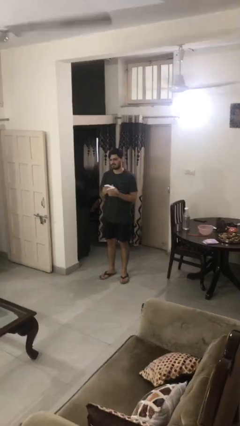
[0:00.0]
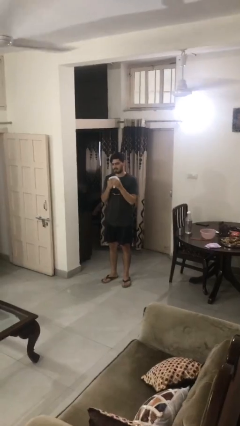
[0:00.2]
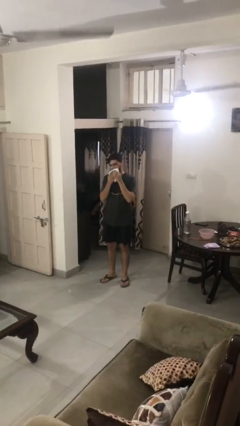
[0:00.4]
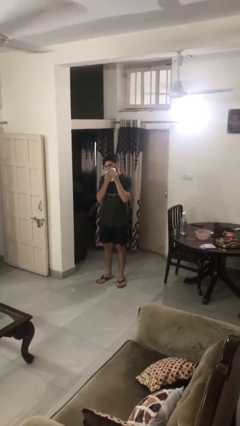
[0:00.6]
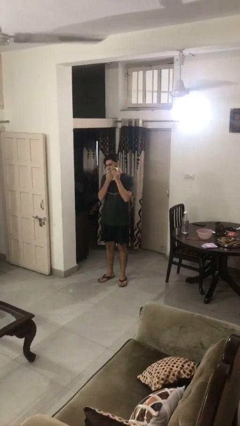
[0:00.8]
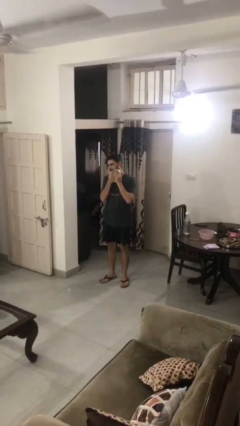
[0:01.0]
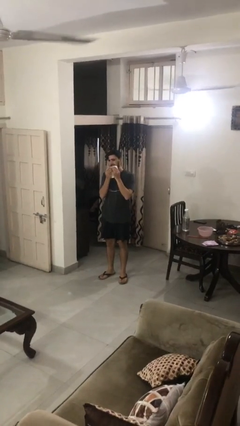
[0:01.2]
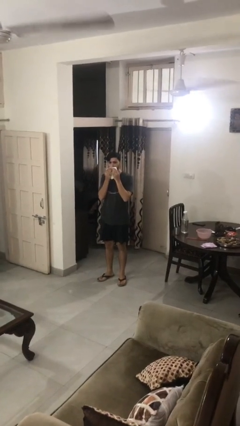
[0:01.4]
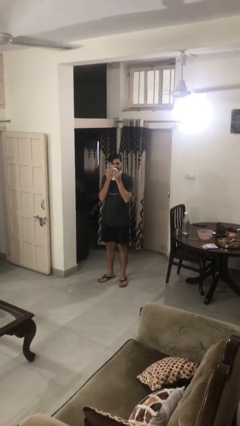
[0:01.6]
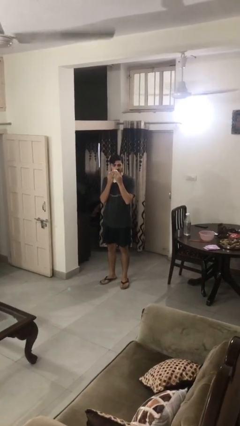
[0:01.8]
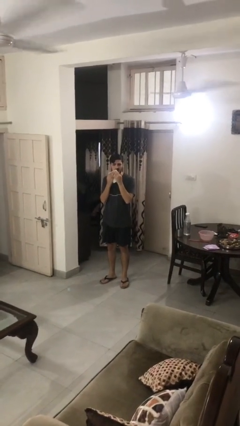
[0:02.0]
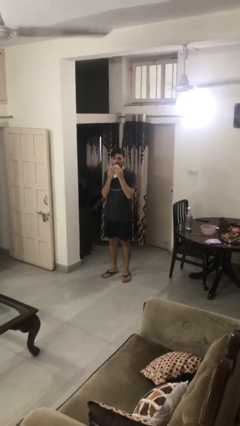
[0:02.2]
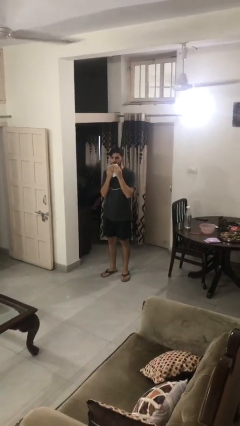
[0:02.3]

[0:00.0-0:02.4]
person wipes mouth with napkin

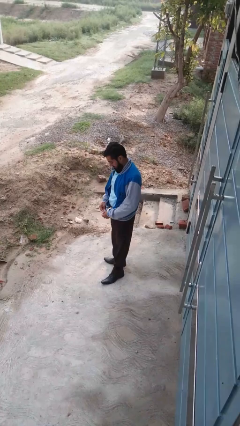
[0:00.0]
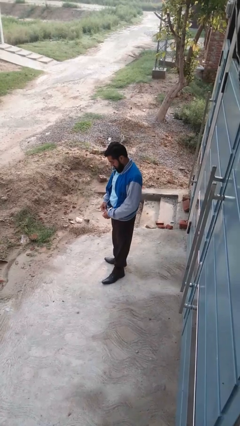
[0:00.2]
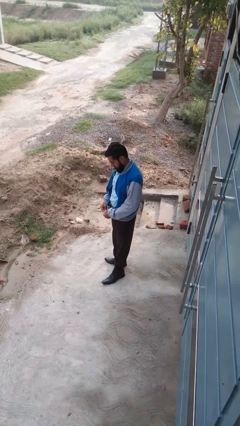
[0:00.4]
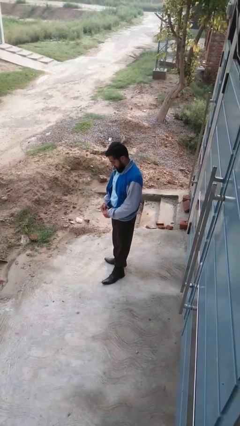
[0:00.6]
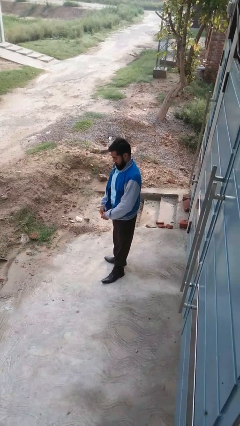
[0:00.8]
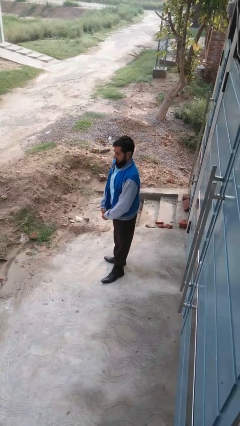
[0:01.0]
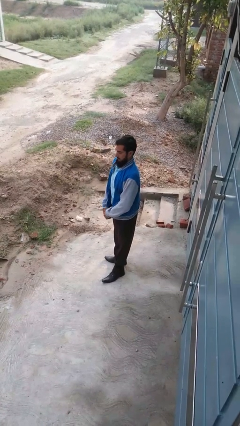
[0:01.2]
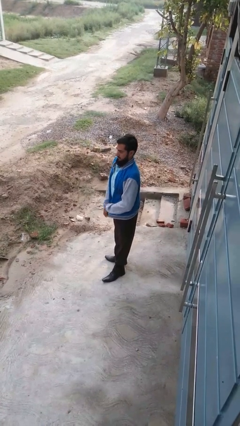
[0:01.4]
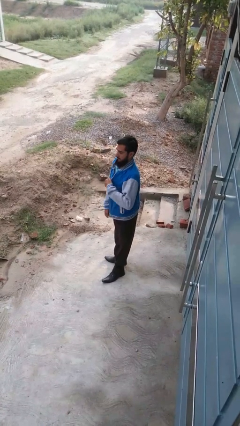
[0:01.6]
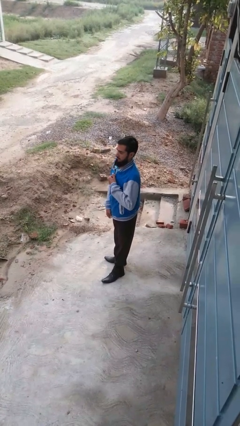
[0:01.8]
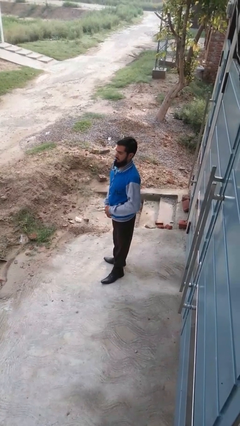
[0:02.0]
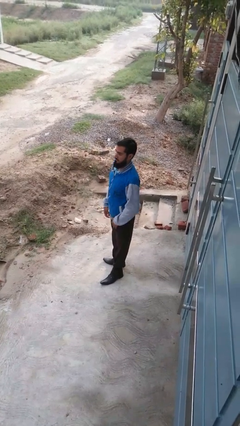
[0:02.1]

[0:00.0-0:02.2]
person zips up jacket

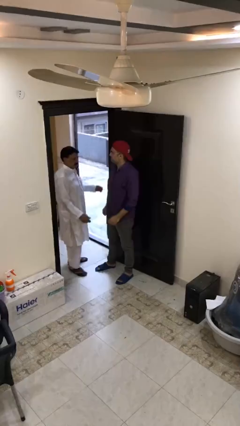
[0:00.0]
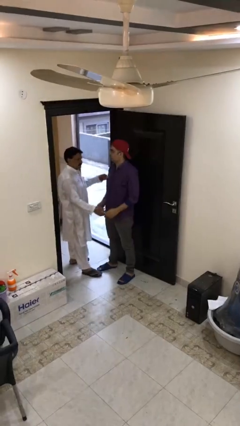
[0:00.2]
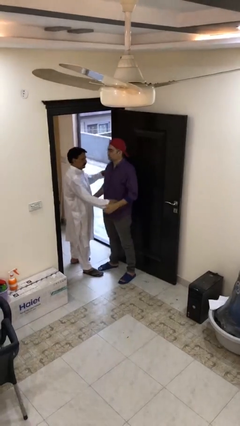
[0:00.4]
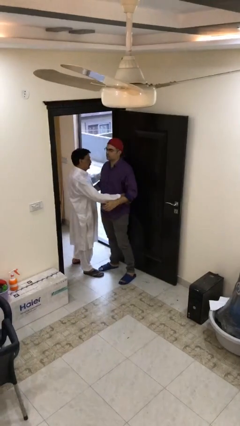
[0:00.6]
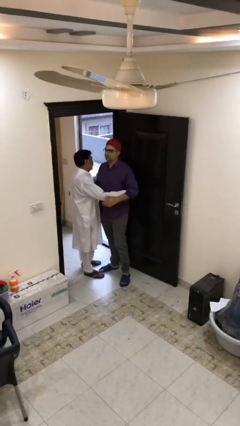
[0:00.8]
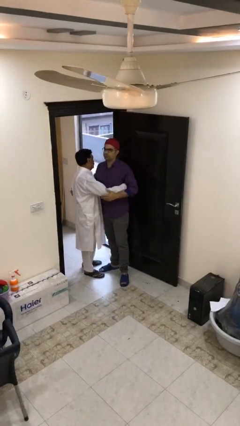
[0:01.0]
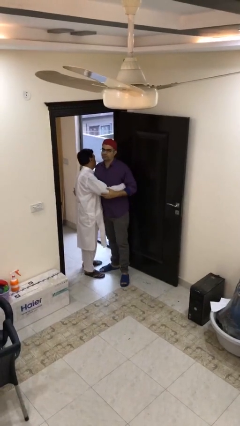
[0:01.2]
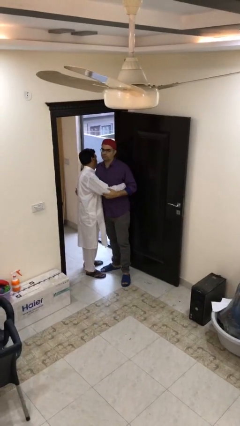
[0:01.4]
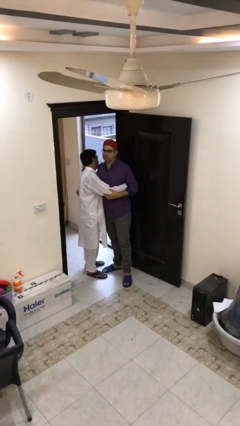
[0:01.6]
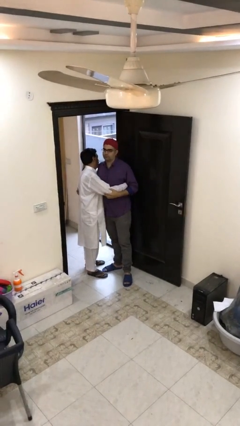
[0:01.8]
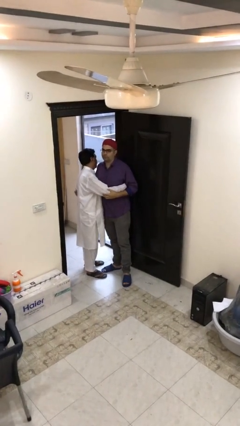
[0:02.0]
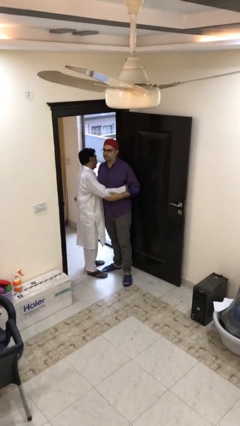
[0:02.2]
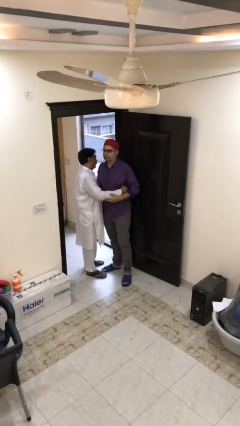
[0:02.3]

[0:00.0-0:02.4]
person embraces person

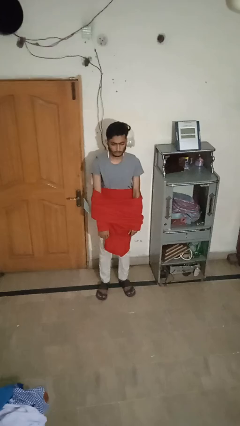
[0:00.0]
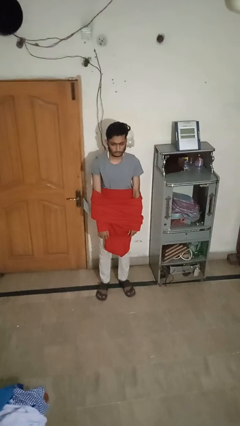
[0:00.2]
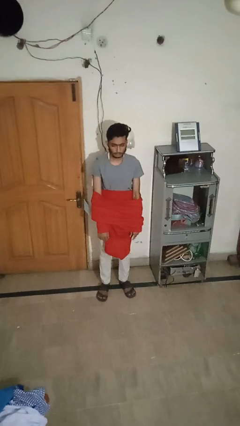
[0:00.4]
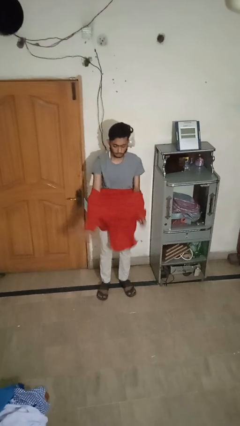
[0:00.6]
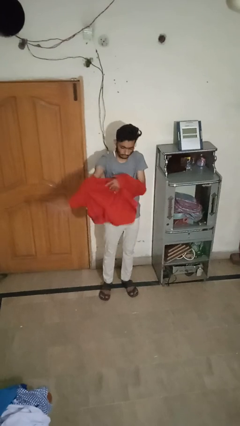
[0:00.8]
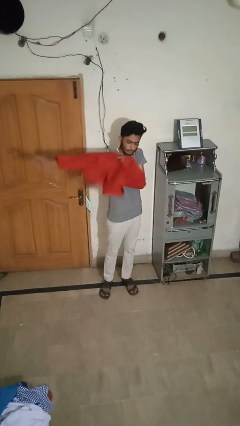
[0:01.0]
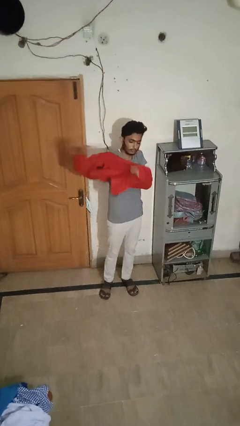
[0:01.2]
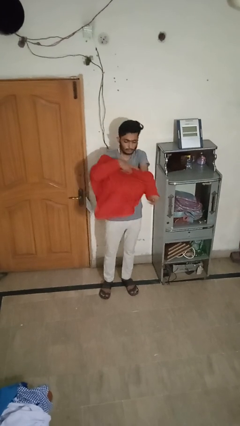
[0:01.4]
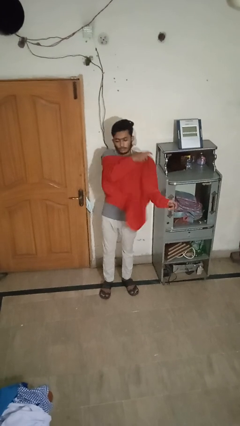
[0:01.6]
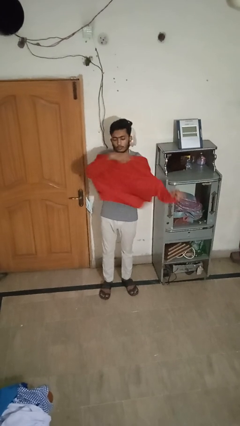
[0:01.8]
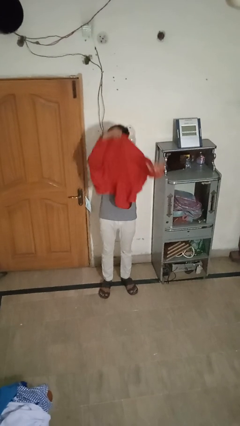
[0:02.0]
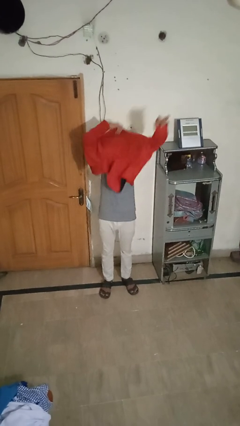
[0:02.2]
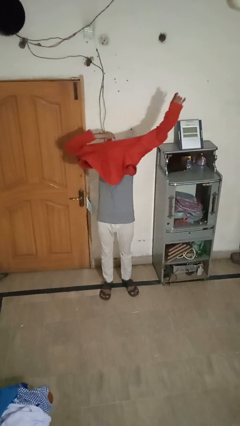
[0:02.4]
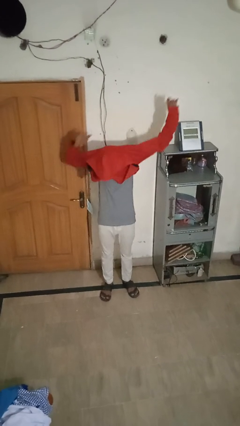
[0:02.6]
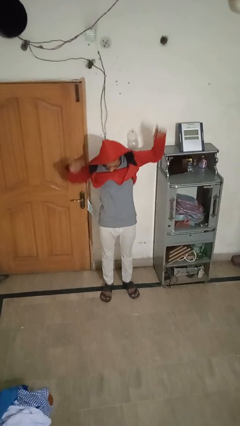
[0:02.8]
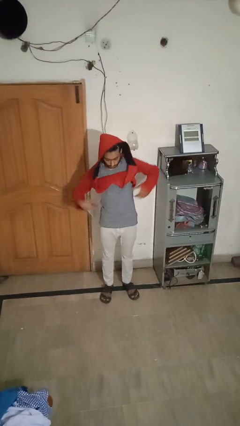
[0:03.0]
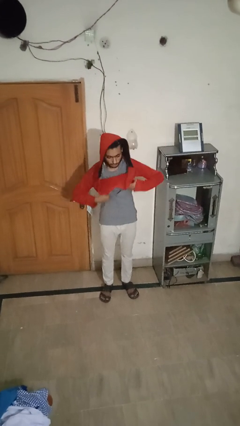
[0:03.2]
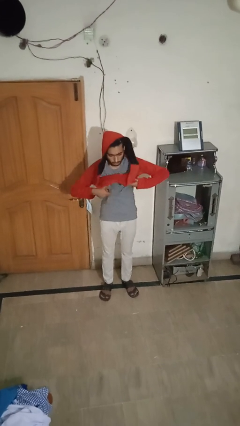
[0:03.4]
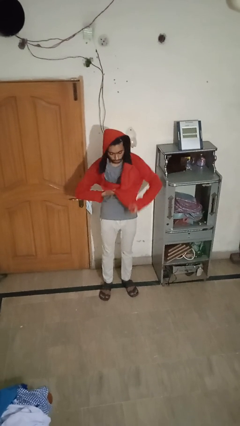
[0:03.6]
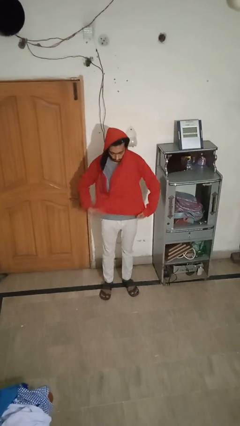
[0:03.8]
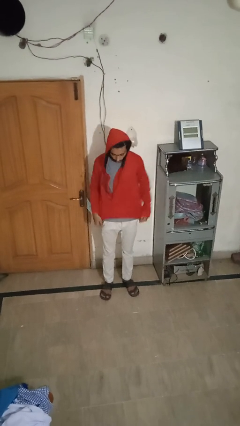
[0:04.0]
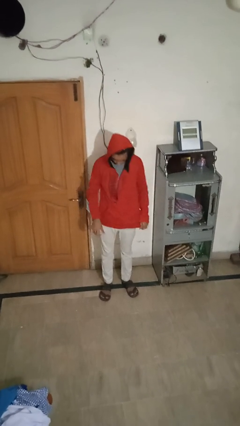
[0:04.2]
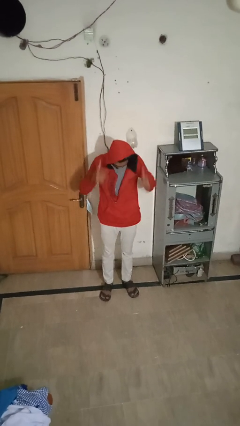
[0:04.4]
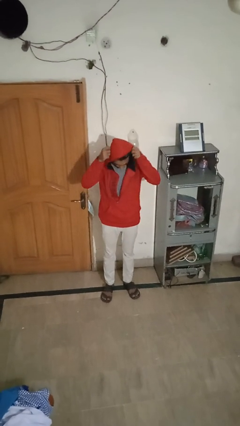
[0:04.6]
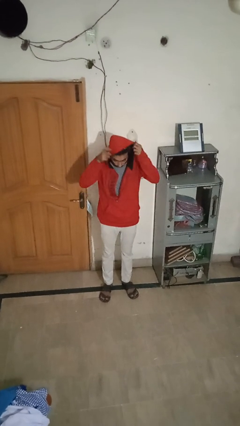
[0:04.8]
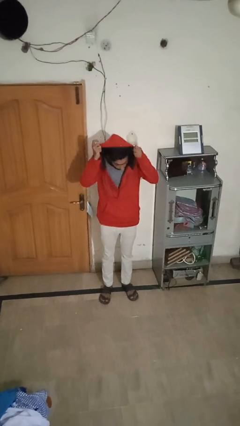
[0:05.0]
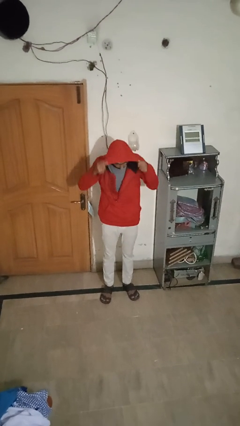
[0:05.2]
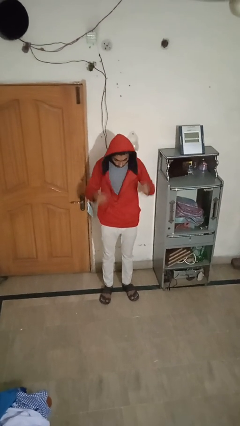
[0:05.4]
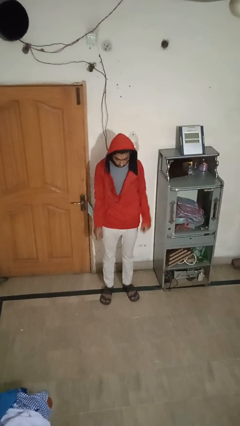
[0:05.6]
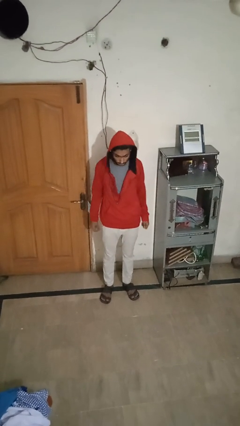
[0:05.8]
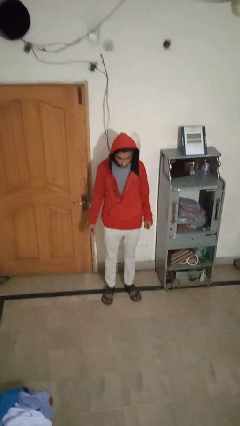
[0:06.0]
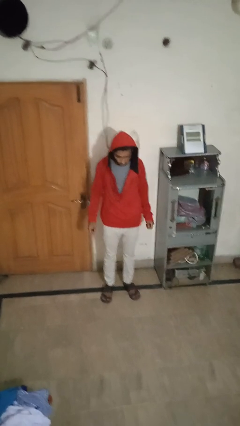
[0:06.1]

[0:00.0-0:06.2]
person puts on hoodie

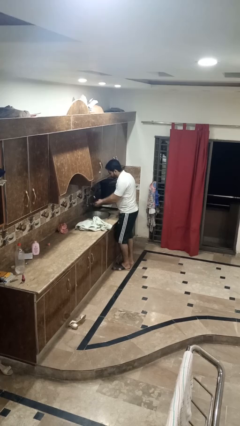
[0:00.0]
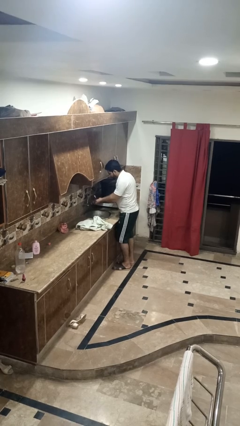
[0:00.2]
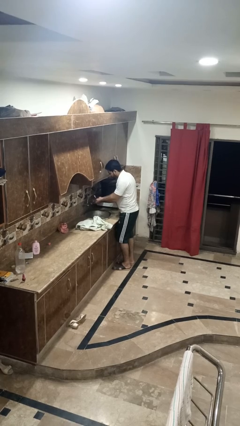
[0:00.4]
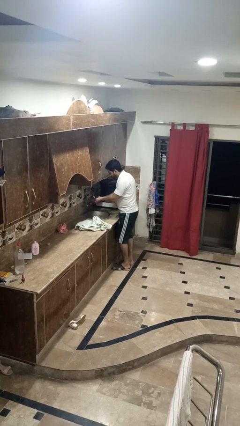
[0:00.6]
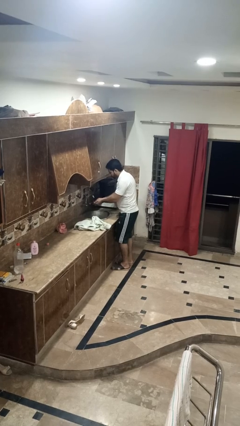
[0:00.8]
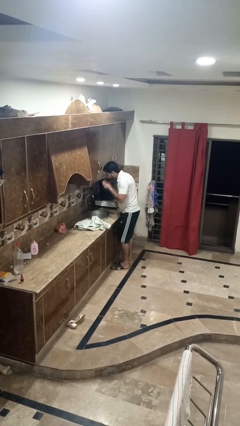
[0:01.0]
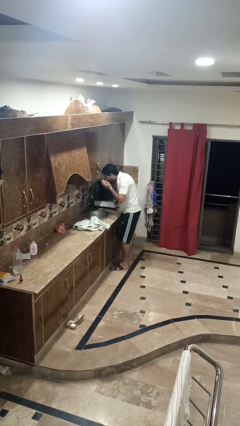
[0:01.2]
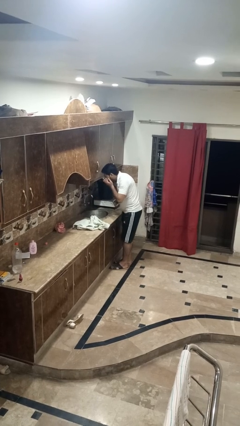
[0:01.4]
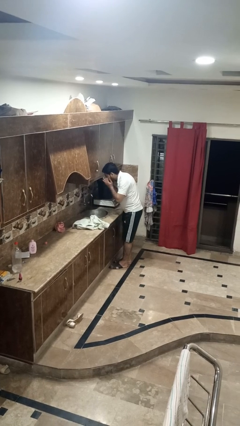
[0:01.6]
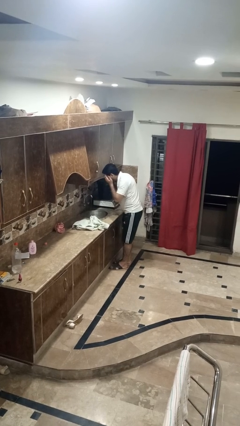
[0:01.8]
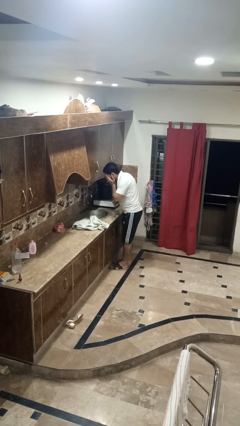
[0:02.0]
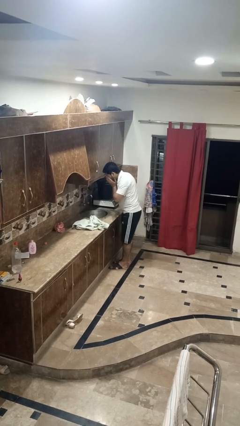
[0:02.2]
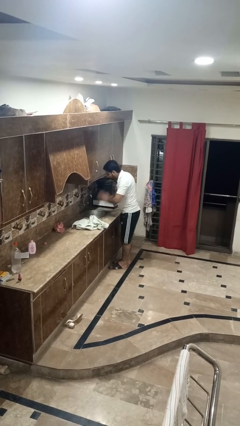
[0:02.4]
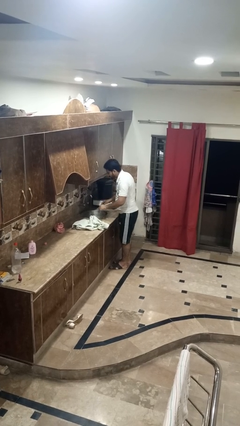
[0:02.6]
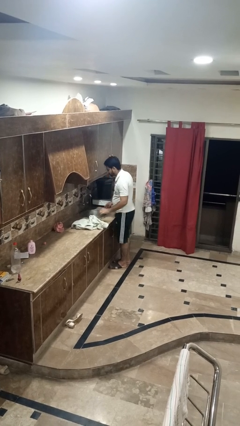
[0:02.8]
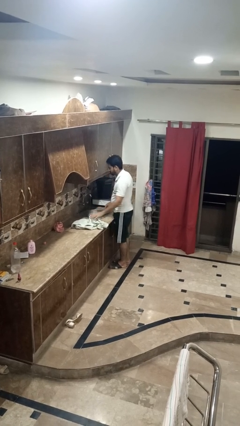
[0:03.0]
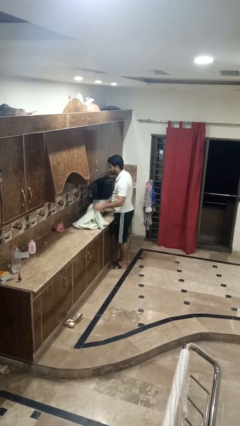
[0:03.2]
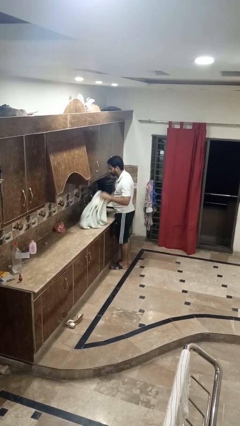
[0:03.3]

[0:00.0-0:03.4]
person washes face

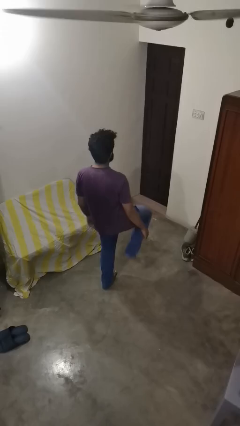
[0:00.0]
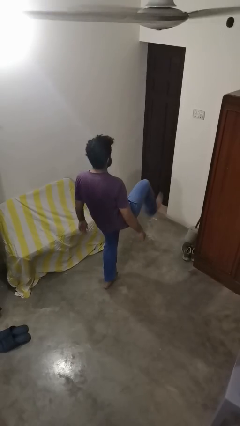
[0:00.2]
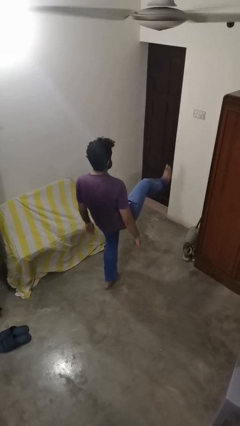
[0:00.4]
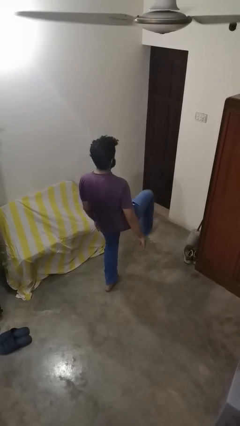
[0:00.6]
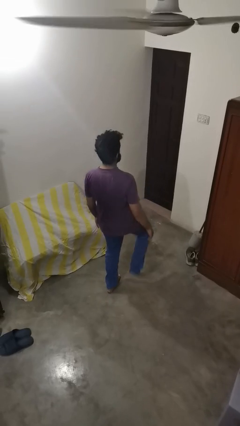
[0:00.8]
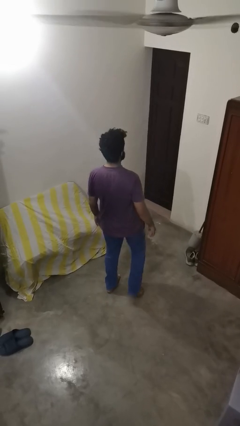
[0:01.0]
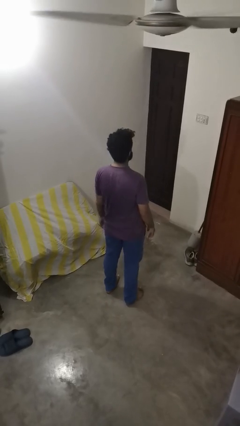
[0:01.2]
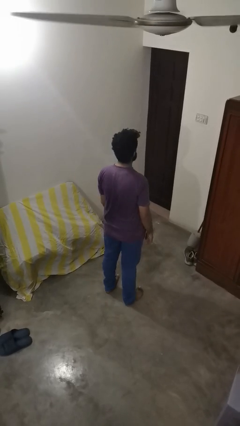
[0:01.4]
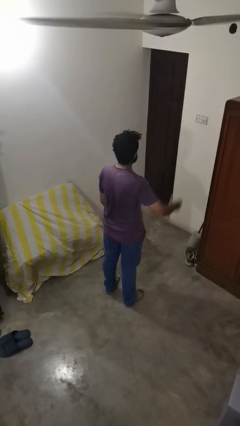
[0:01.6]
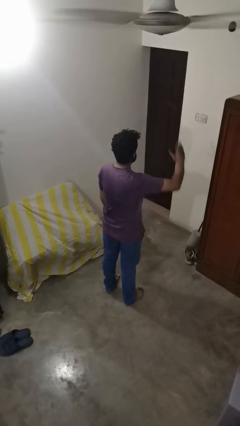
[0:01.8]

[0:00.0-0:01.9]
person karate kicks
